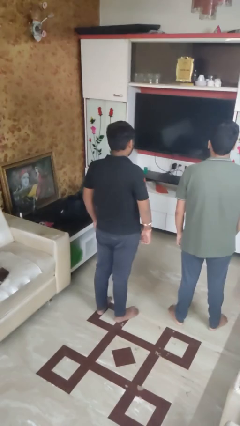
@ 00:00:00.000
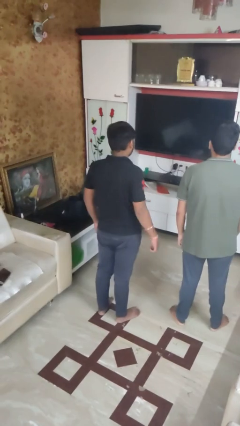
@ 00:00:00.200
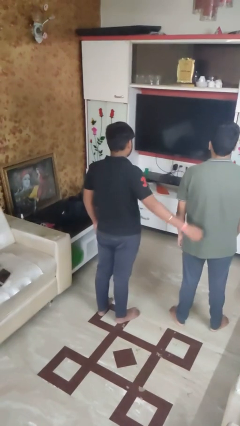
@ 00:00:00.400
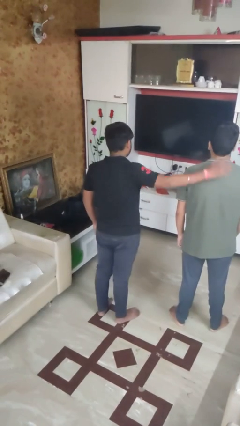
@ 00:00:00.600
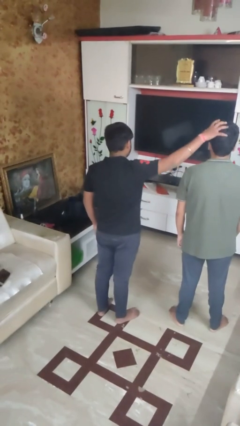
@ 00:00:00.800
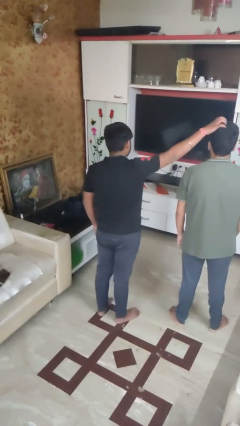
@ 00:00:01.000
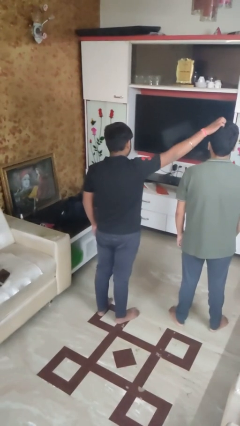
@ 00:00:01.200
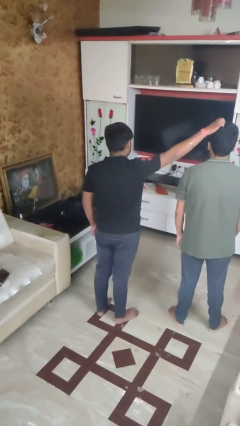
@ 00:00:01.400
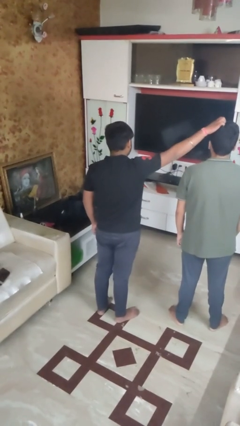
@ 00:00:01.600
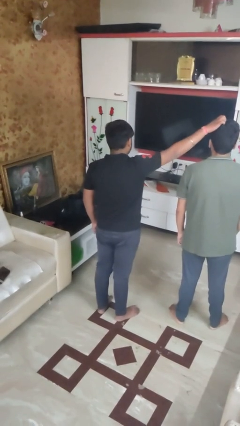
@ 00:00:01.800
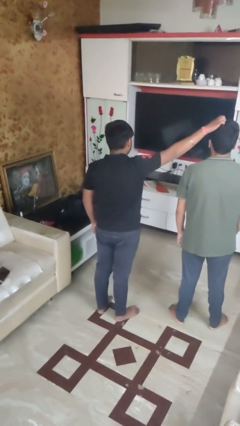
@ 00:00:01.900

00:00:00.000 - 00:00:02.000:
person grabs person by hair

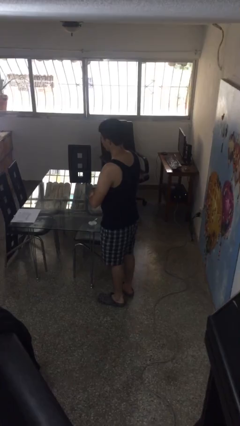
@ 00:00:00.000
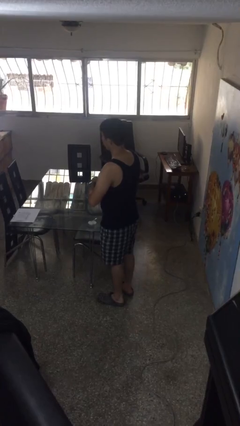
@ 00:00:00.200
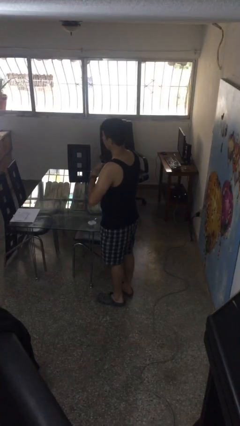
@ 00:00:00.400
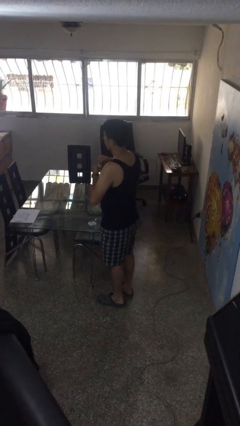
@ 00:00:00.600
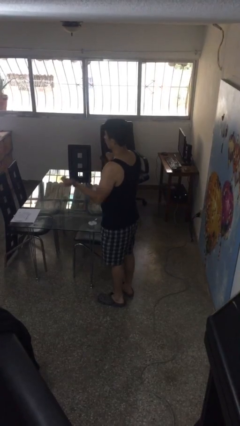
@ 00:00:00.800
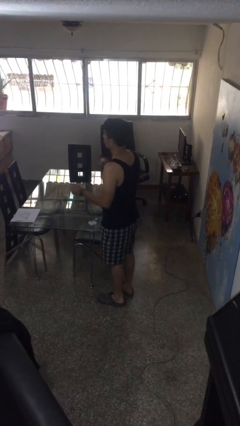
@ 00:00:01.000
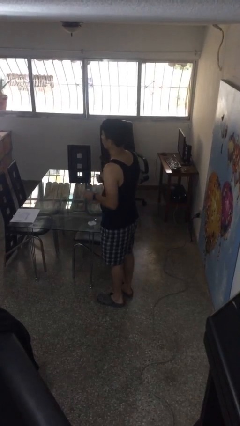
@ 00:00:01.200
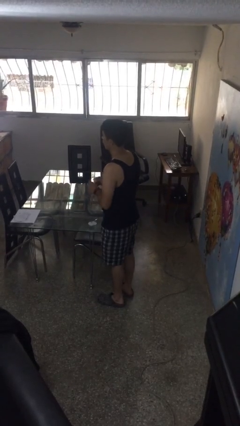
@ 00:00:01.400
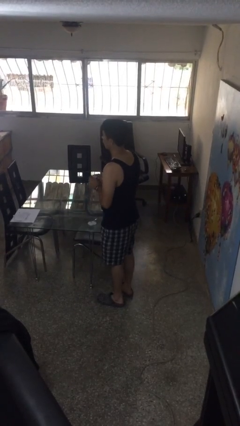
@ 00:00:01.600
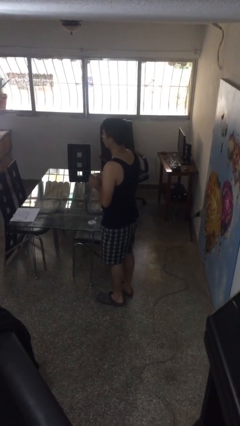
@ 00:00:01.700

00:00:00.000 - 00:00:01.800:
person tears paper

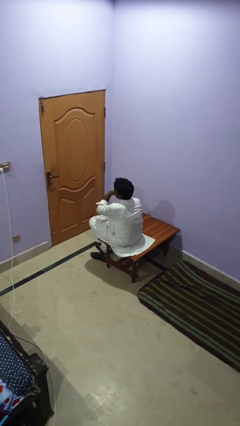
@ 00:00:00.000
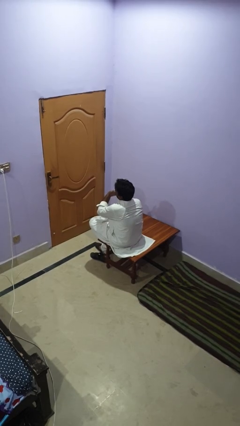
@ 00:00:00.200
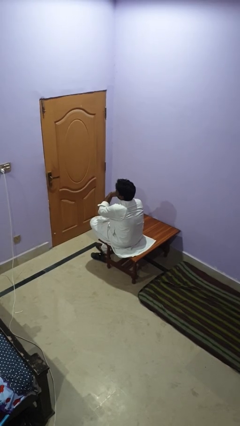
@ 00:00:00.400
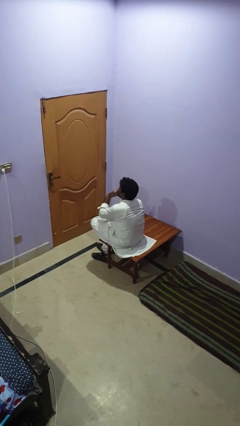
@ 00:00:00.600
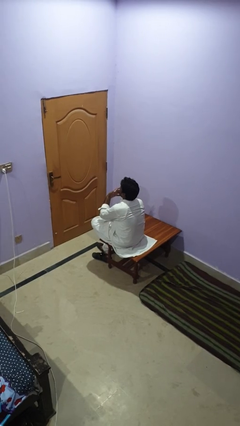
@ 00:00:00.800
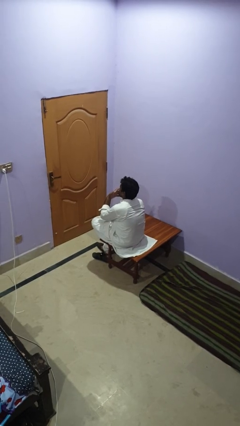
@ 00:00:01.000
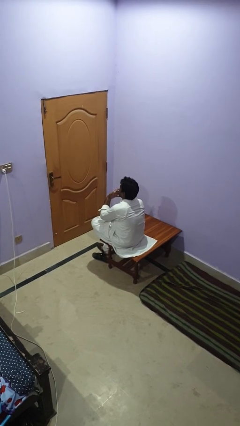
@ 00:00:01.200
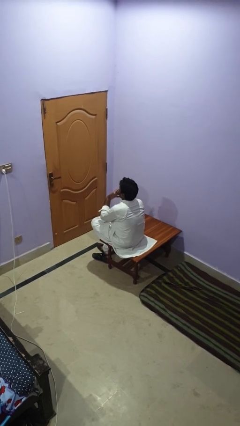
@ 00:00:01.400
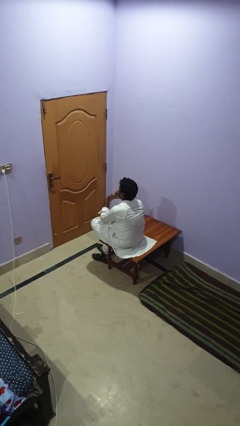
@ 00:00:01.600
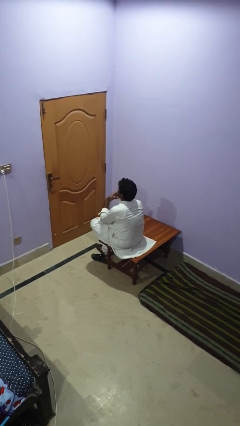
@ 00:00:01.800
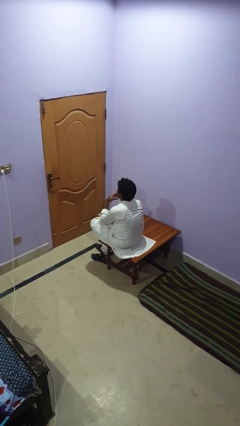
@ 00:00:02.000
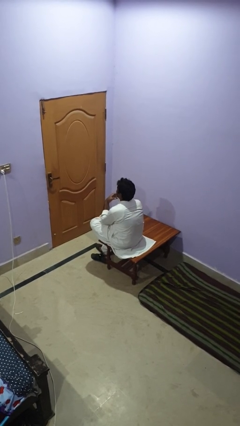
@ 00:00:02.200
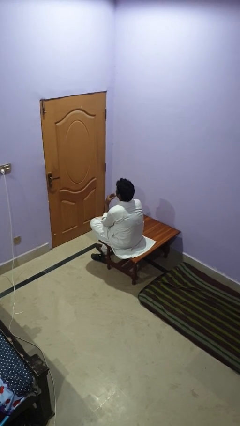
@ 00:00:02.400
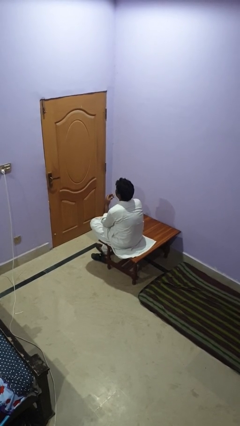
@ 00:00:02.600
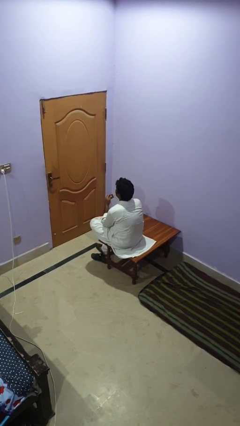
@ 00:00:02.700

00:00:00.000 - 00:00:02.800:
person licks fingers

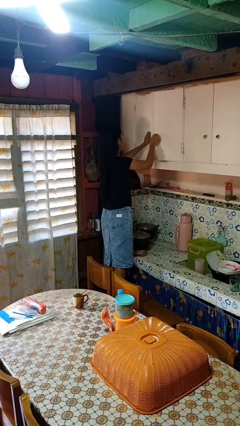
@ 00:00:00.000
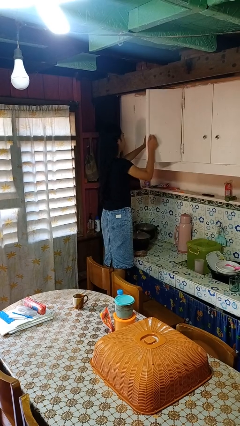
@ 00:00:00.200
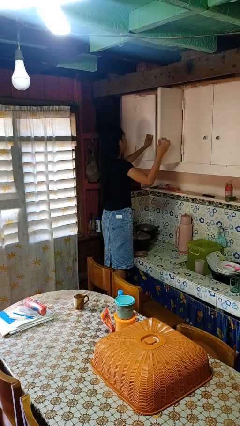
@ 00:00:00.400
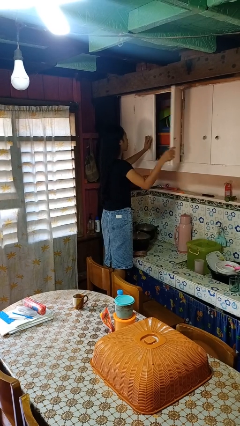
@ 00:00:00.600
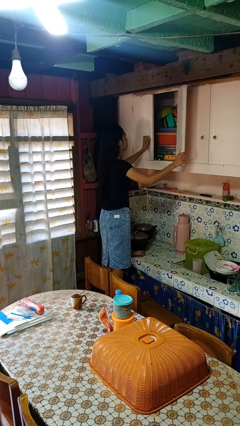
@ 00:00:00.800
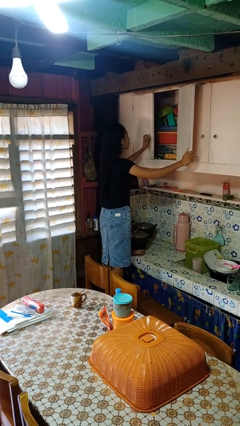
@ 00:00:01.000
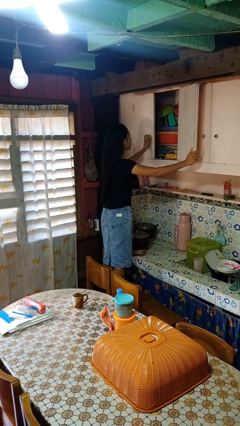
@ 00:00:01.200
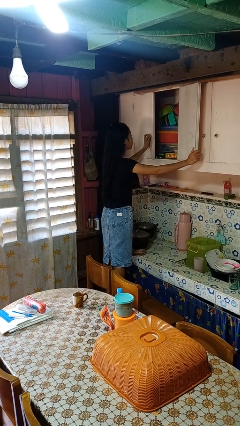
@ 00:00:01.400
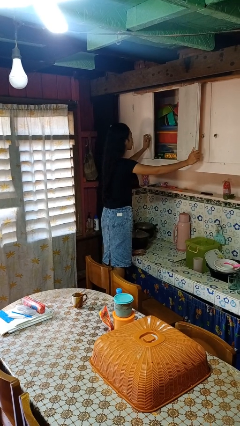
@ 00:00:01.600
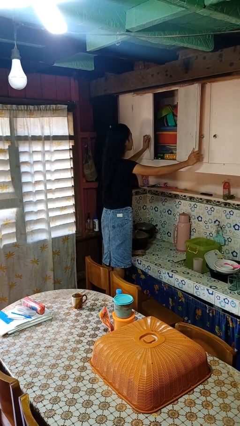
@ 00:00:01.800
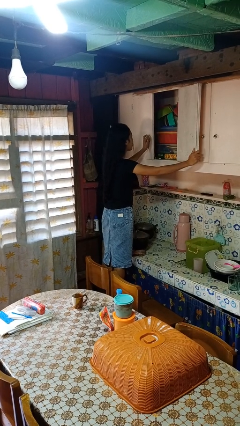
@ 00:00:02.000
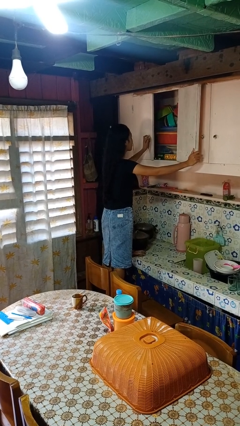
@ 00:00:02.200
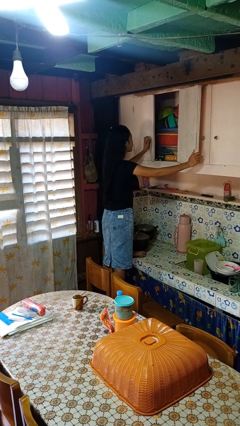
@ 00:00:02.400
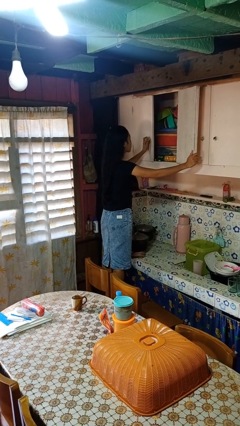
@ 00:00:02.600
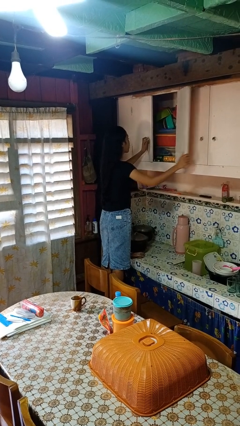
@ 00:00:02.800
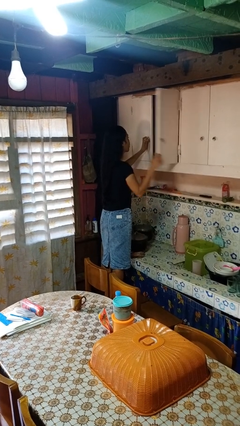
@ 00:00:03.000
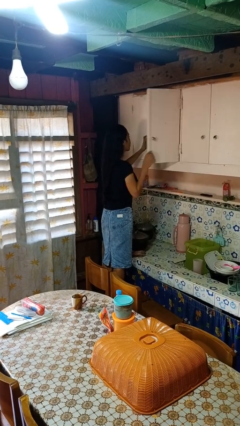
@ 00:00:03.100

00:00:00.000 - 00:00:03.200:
person opens cabinet

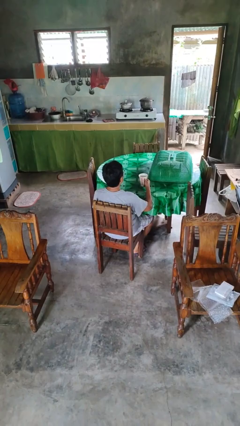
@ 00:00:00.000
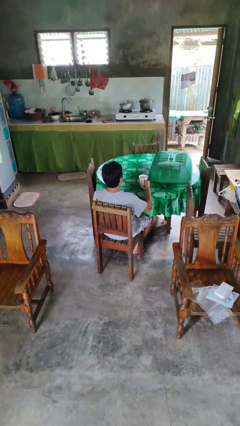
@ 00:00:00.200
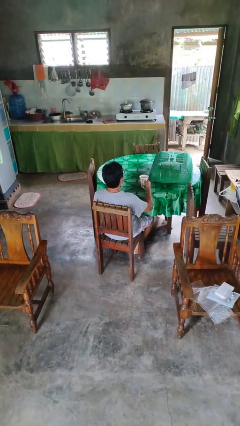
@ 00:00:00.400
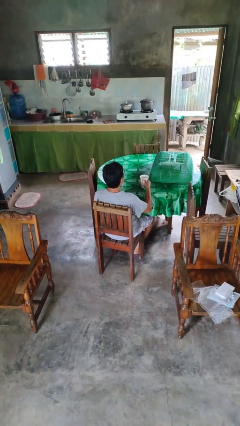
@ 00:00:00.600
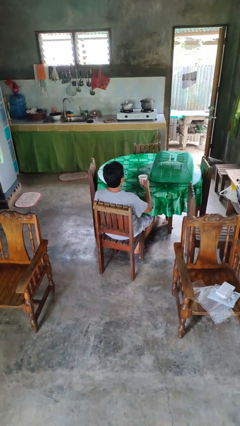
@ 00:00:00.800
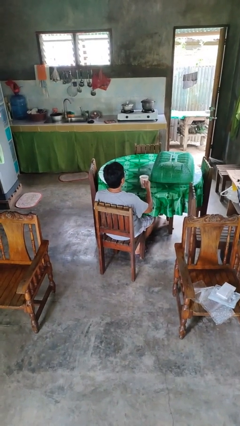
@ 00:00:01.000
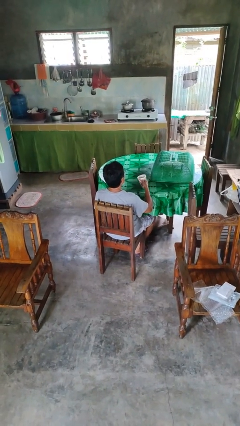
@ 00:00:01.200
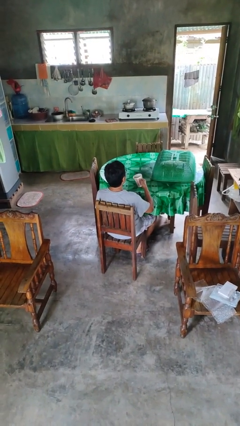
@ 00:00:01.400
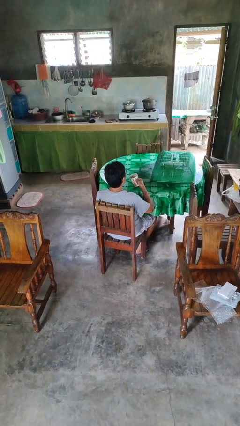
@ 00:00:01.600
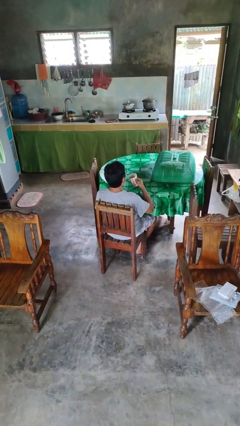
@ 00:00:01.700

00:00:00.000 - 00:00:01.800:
person picks up object from table

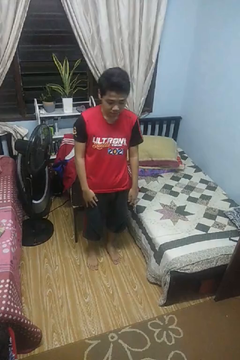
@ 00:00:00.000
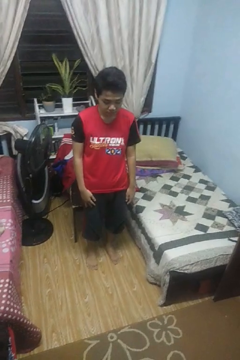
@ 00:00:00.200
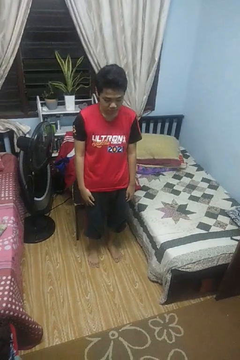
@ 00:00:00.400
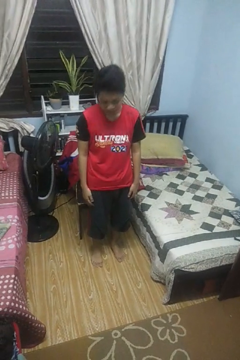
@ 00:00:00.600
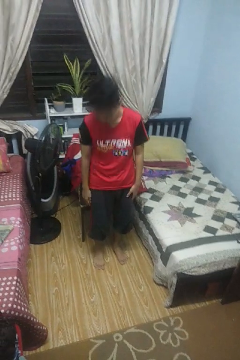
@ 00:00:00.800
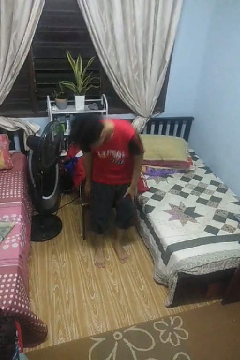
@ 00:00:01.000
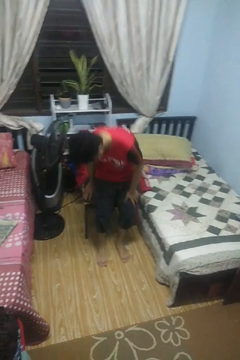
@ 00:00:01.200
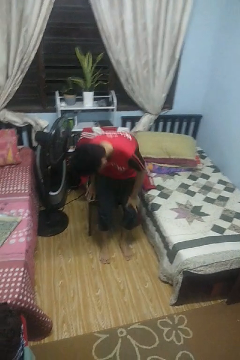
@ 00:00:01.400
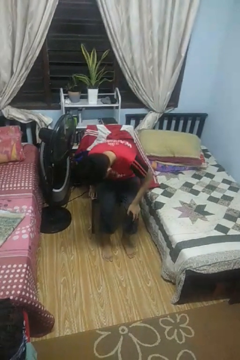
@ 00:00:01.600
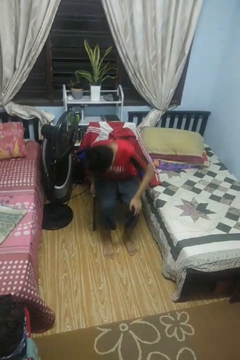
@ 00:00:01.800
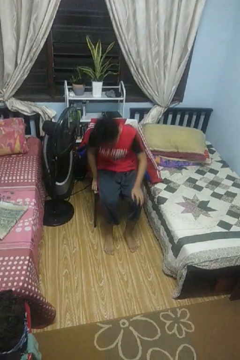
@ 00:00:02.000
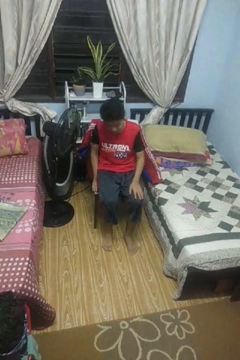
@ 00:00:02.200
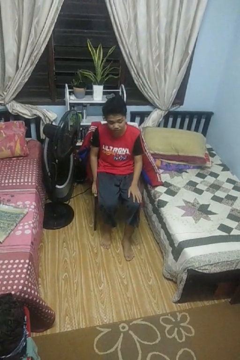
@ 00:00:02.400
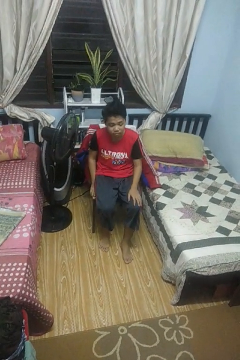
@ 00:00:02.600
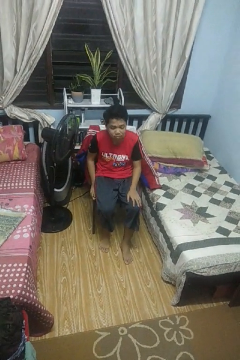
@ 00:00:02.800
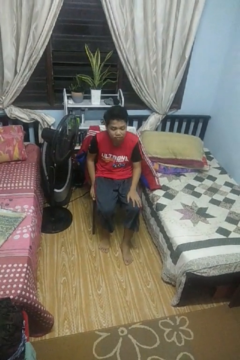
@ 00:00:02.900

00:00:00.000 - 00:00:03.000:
person sits down

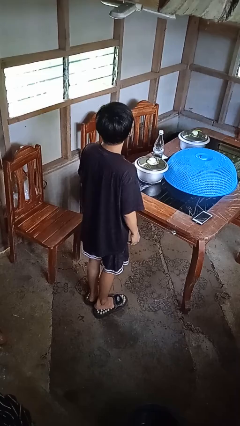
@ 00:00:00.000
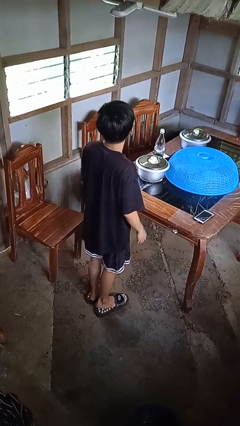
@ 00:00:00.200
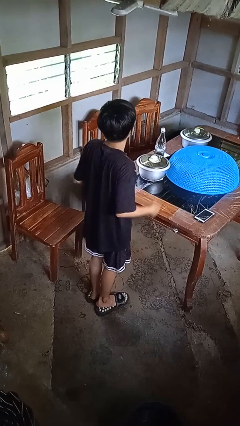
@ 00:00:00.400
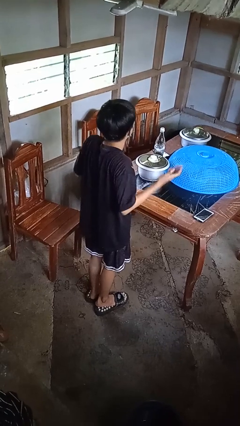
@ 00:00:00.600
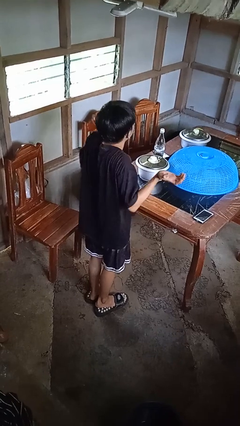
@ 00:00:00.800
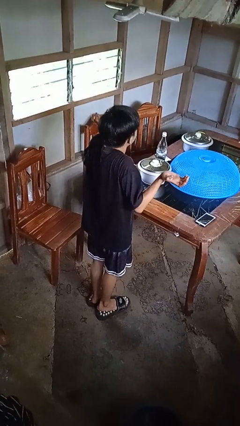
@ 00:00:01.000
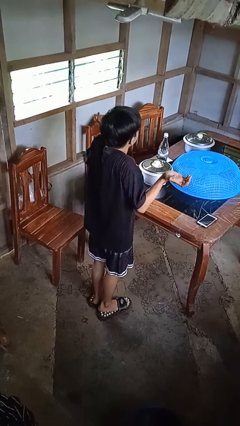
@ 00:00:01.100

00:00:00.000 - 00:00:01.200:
person shrugs

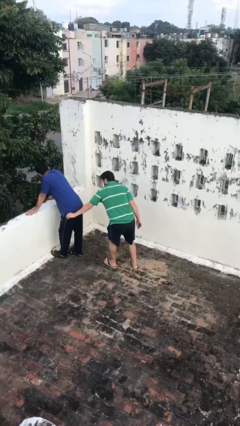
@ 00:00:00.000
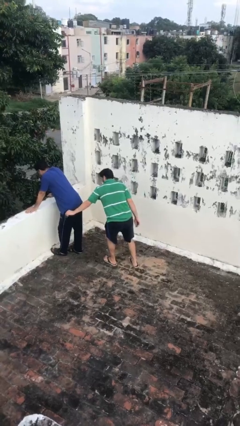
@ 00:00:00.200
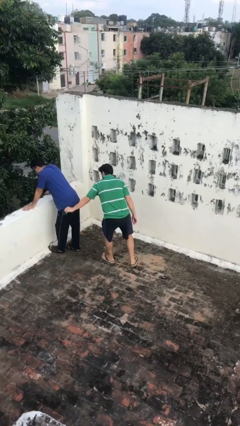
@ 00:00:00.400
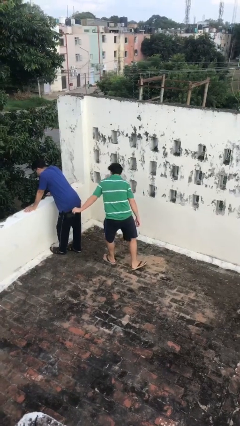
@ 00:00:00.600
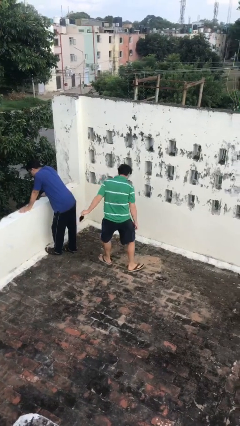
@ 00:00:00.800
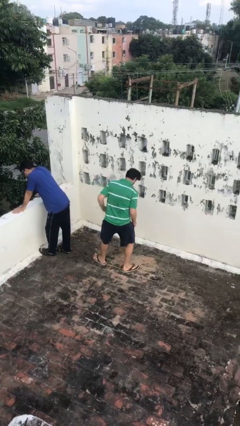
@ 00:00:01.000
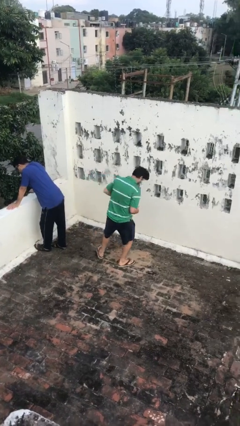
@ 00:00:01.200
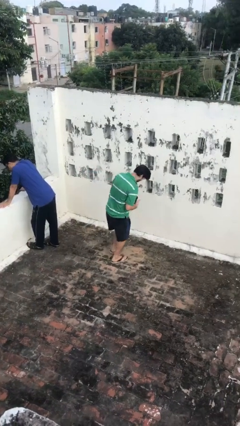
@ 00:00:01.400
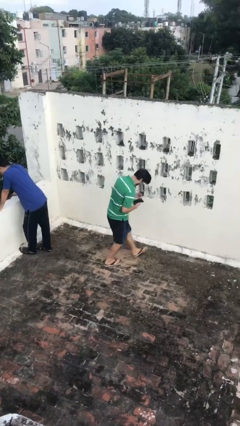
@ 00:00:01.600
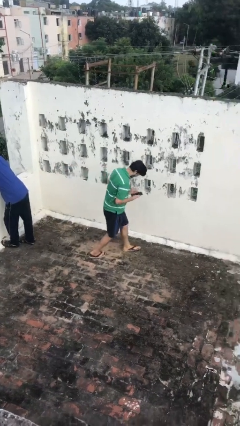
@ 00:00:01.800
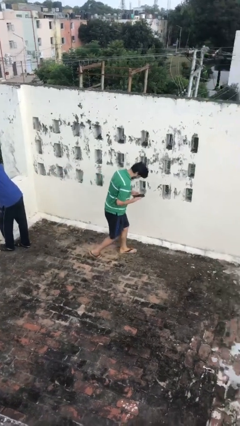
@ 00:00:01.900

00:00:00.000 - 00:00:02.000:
person steals object from person
